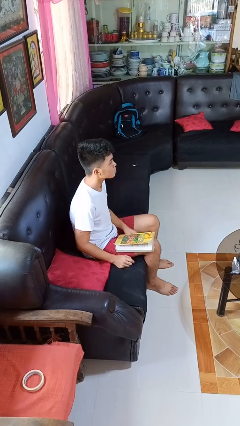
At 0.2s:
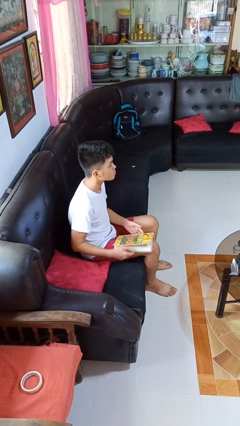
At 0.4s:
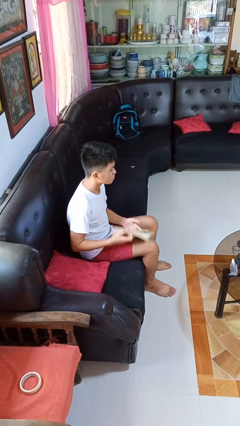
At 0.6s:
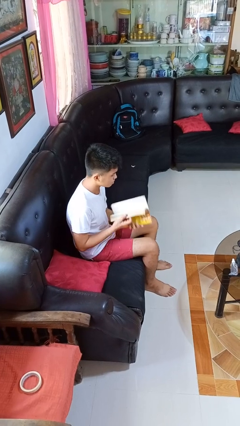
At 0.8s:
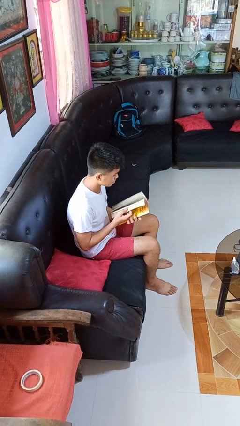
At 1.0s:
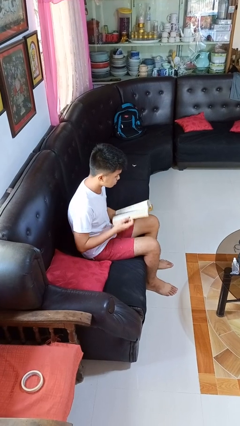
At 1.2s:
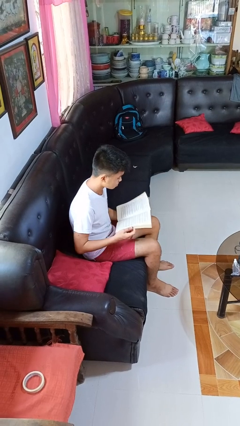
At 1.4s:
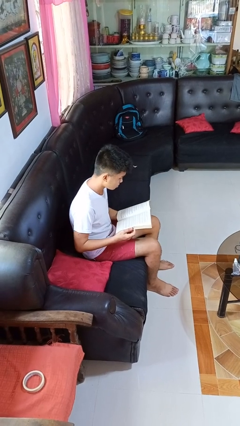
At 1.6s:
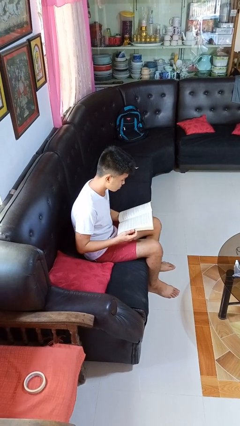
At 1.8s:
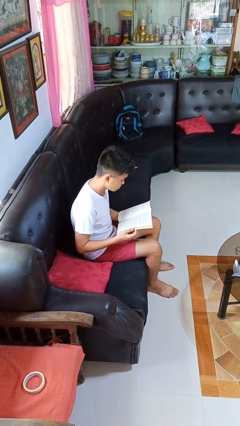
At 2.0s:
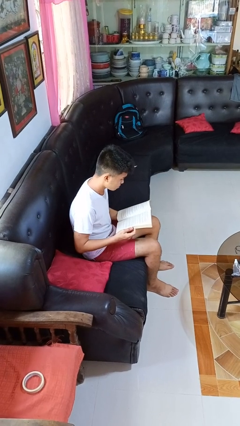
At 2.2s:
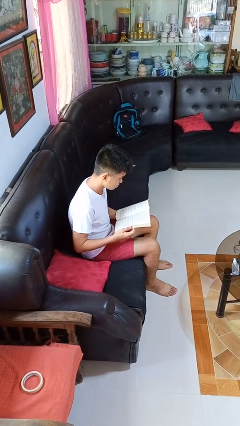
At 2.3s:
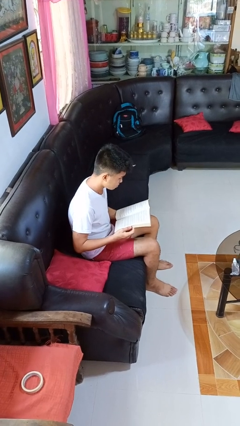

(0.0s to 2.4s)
person reads book

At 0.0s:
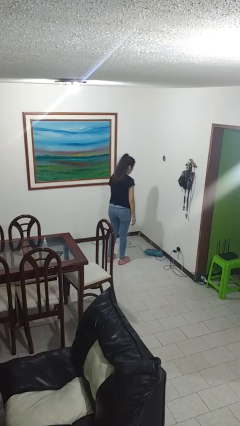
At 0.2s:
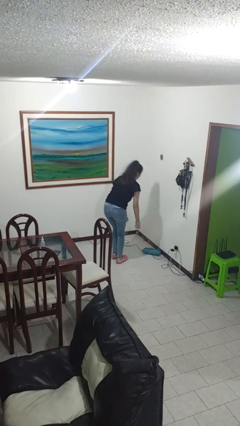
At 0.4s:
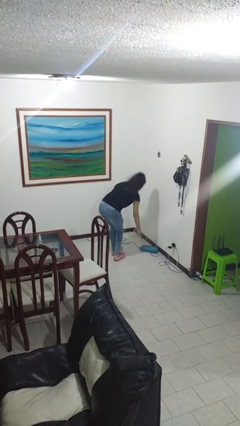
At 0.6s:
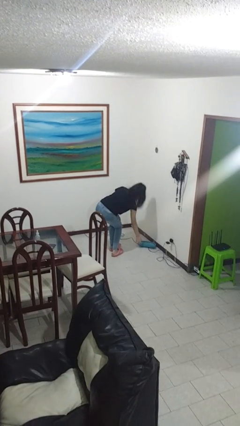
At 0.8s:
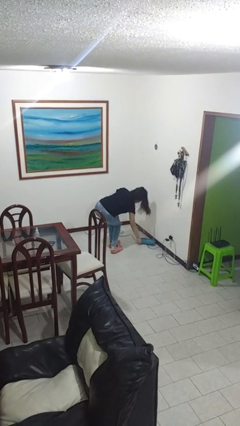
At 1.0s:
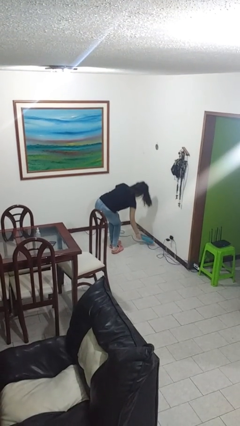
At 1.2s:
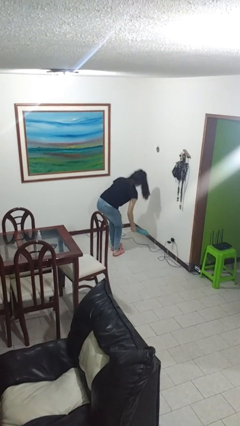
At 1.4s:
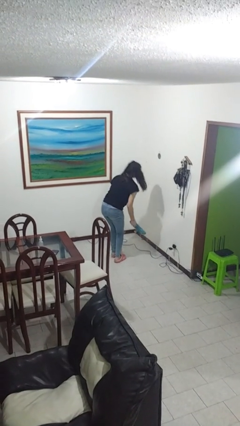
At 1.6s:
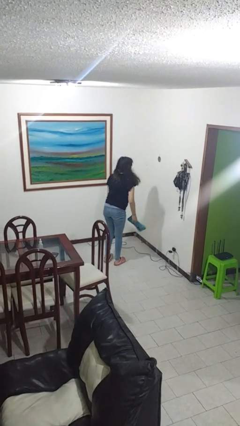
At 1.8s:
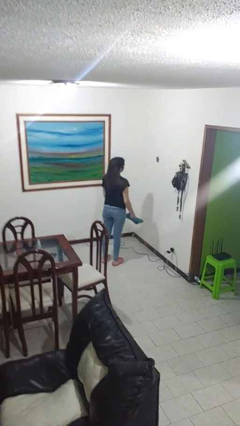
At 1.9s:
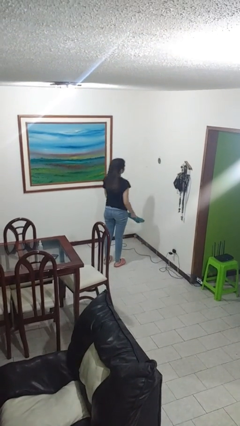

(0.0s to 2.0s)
person picks up object from floor

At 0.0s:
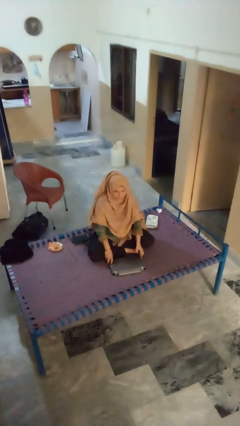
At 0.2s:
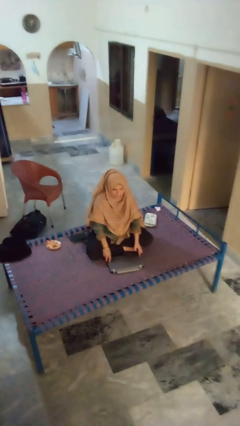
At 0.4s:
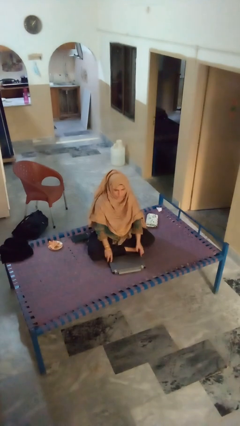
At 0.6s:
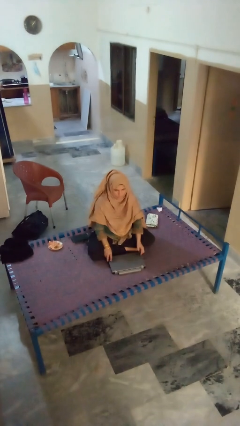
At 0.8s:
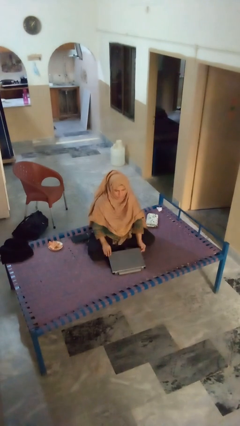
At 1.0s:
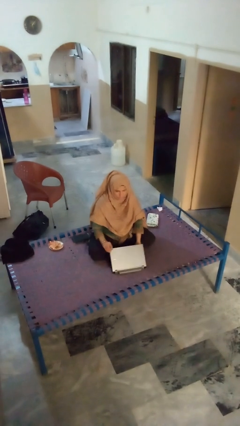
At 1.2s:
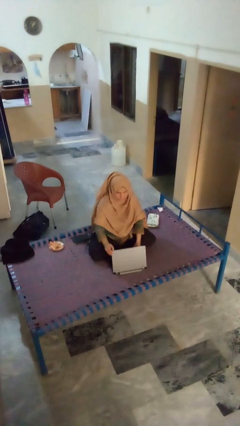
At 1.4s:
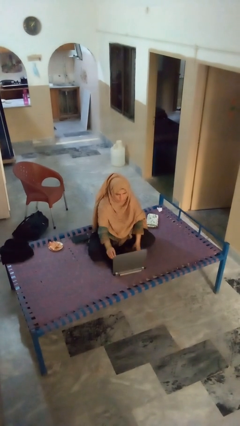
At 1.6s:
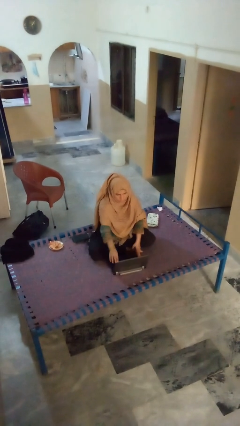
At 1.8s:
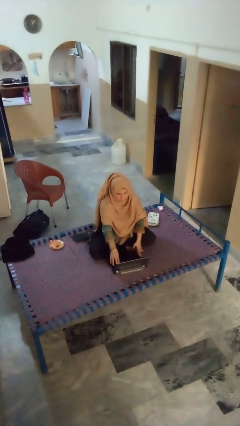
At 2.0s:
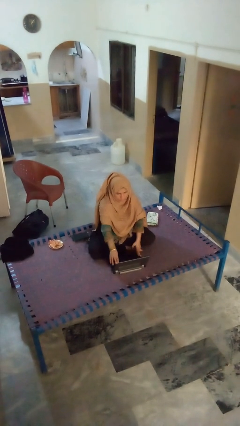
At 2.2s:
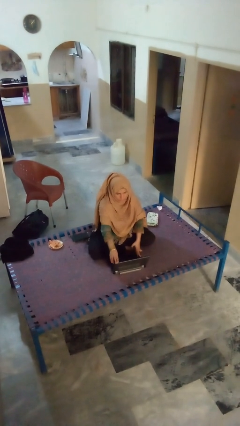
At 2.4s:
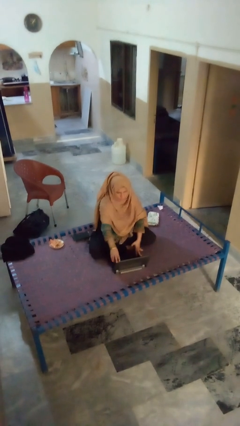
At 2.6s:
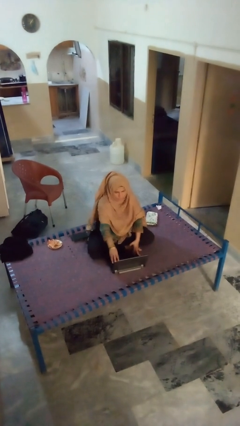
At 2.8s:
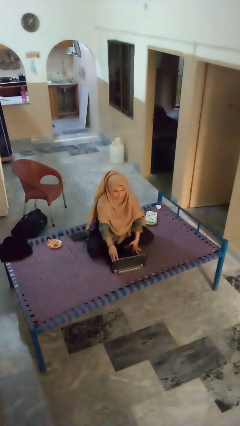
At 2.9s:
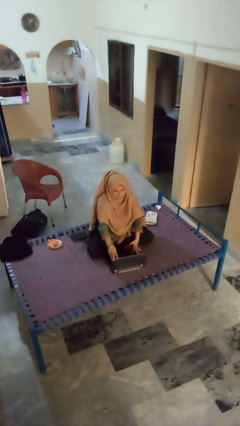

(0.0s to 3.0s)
person opens laptop

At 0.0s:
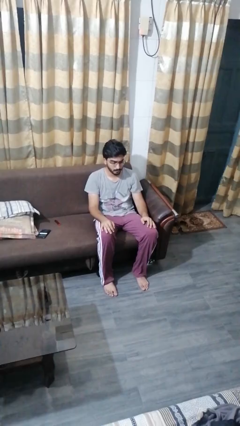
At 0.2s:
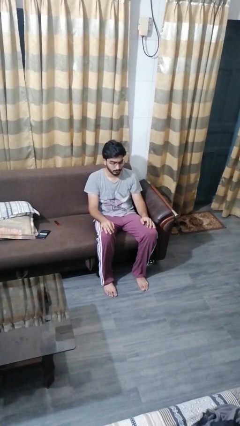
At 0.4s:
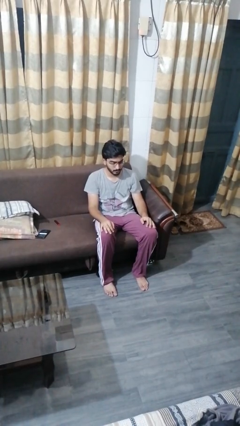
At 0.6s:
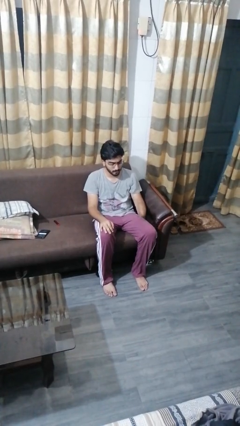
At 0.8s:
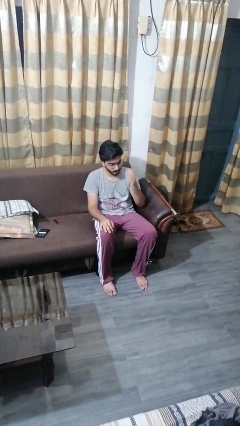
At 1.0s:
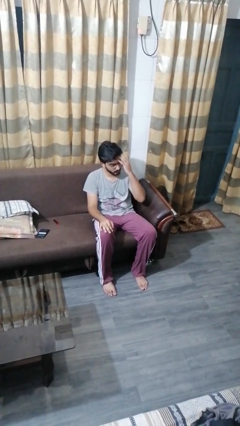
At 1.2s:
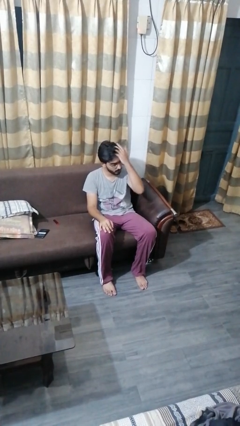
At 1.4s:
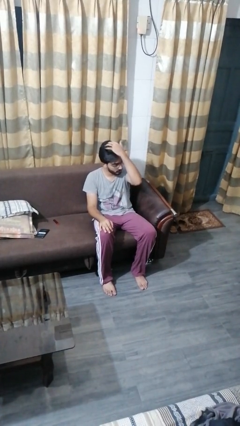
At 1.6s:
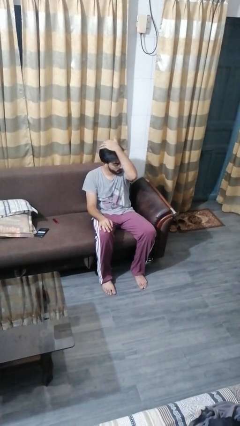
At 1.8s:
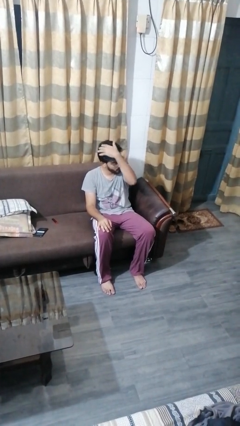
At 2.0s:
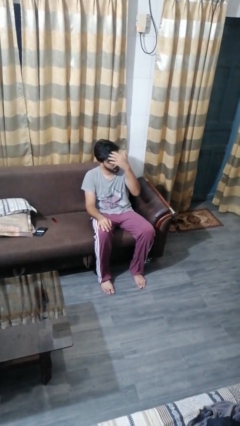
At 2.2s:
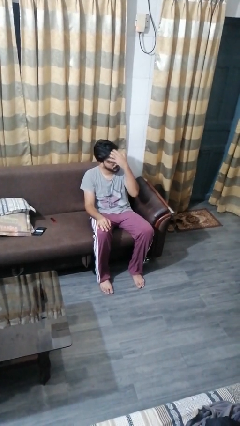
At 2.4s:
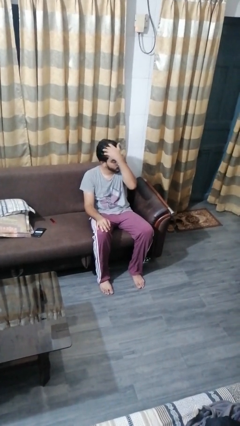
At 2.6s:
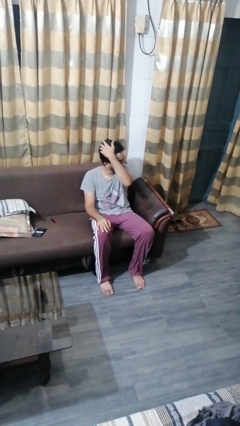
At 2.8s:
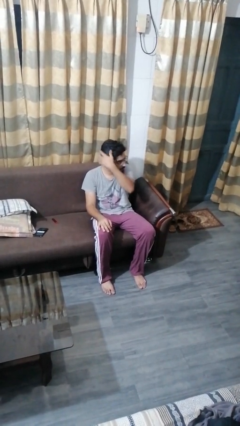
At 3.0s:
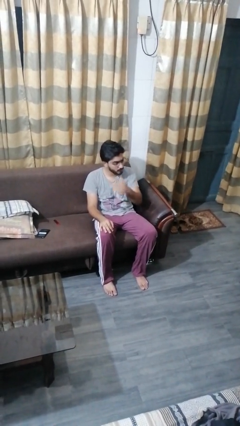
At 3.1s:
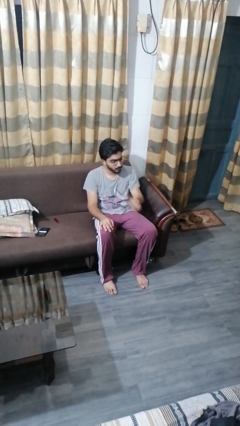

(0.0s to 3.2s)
person strokes hair

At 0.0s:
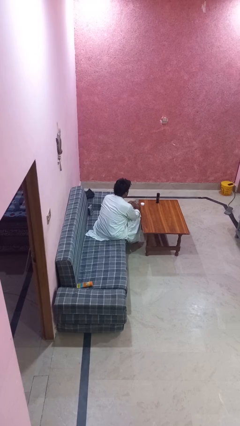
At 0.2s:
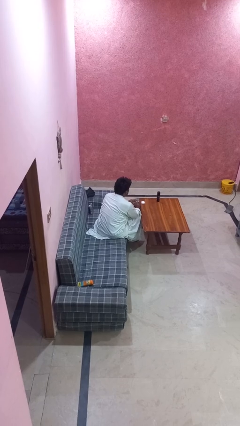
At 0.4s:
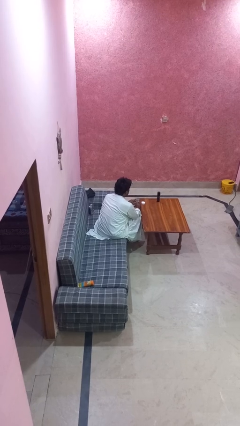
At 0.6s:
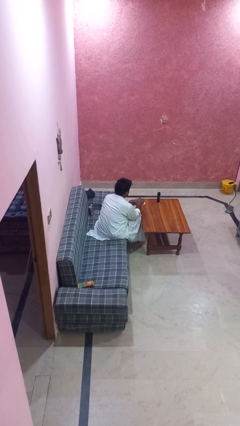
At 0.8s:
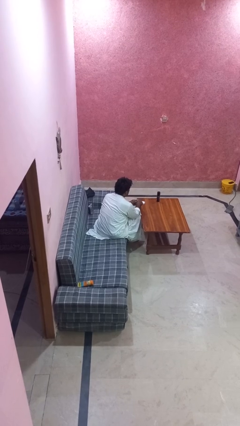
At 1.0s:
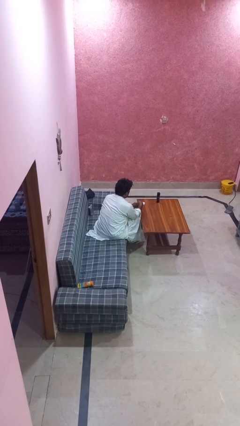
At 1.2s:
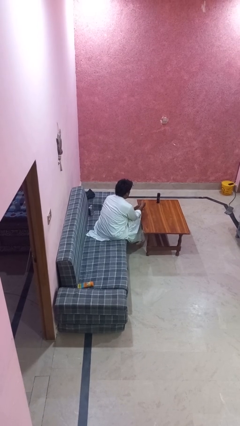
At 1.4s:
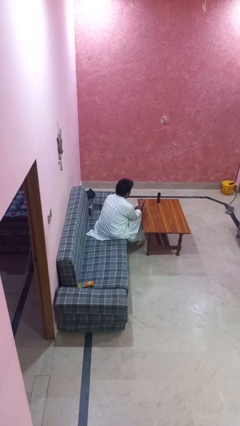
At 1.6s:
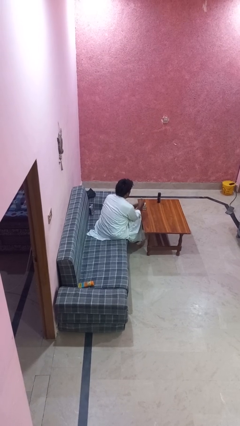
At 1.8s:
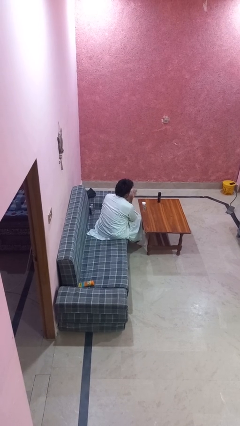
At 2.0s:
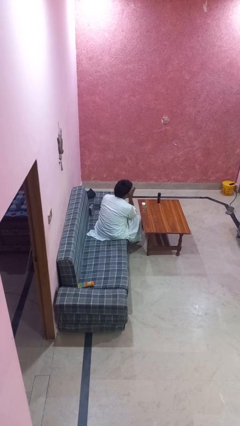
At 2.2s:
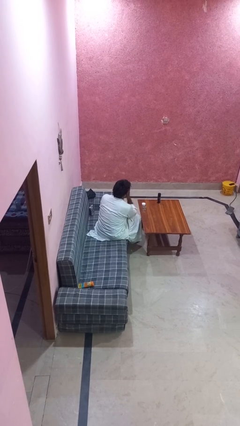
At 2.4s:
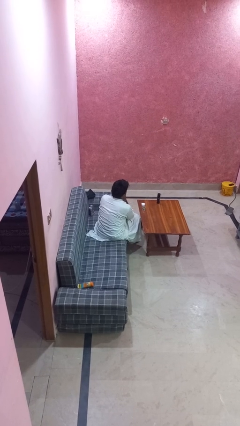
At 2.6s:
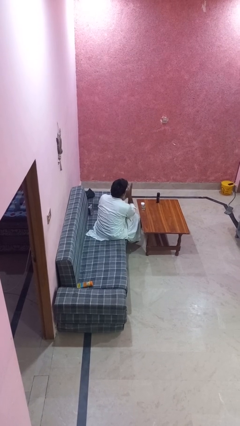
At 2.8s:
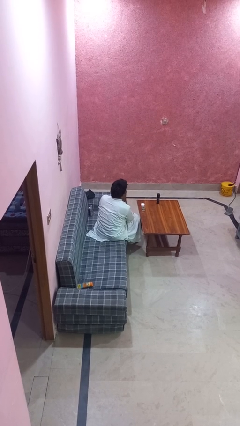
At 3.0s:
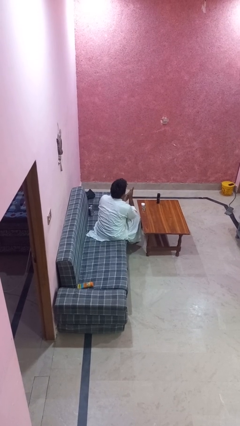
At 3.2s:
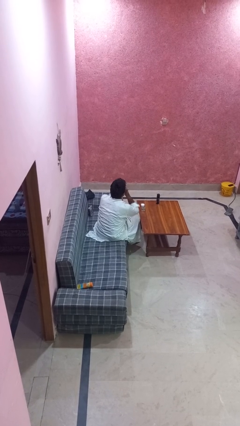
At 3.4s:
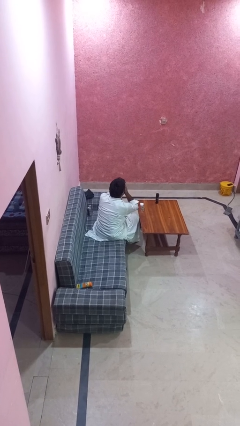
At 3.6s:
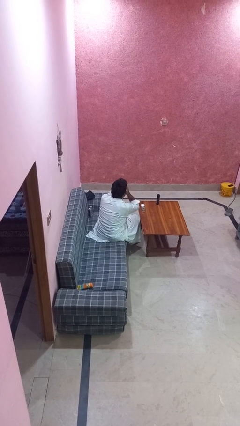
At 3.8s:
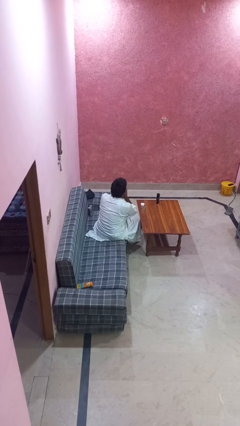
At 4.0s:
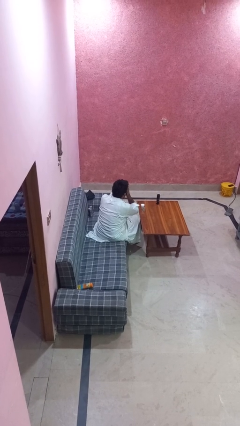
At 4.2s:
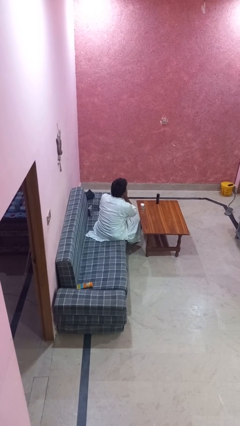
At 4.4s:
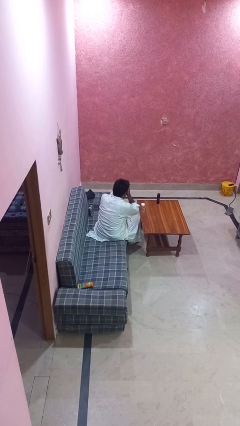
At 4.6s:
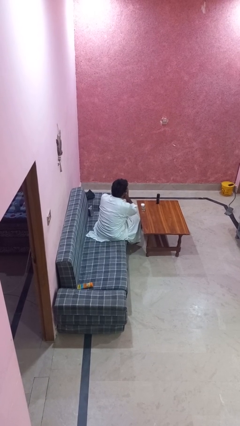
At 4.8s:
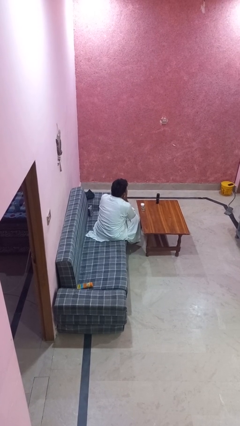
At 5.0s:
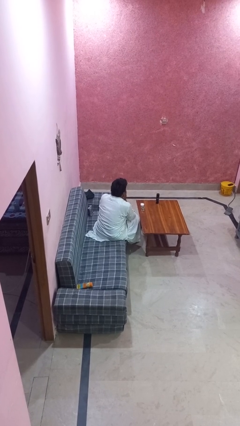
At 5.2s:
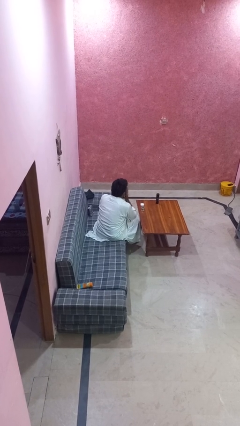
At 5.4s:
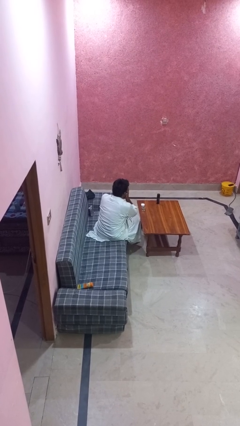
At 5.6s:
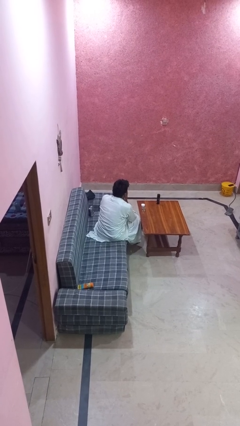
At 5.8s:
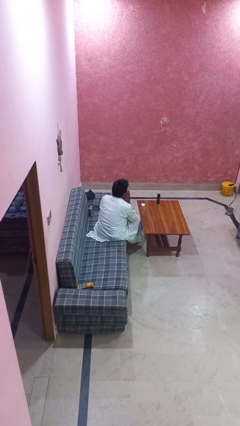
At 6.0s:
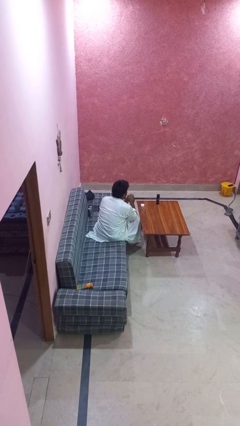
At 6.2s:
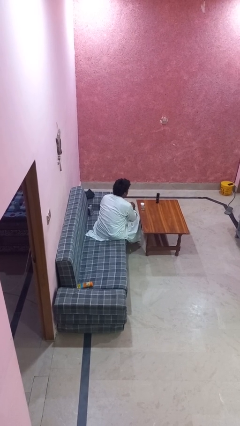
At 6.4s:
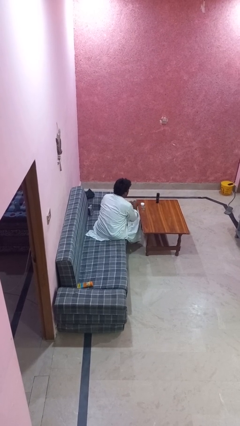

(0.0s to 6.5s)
person applies facial moisturizer

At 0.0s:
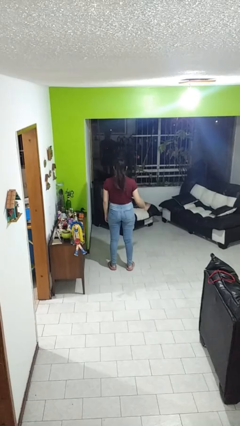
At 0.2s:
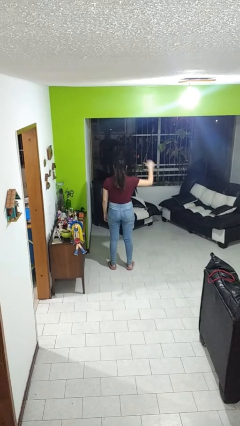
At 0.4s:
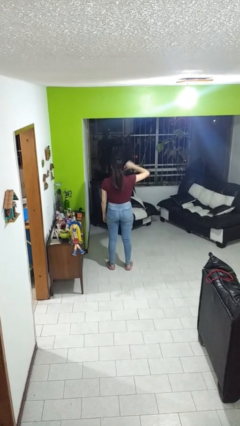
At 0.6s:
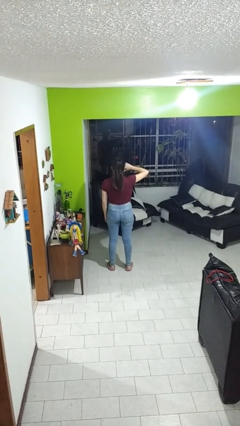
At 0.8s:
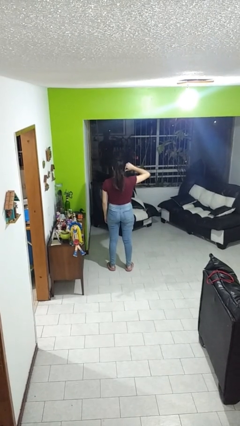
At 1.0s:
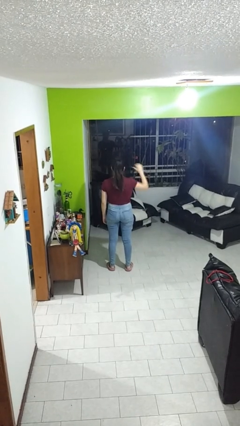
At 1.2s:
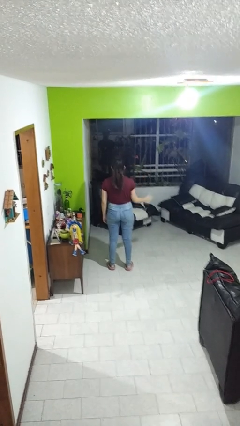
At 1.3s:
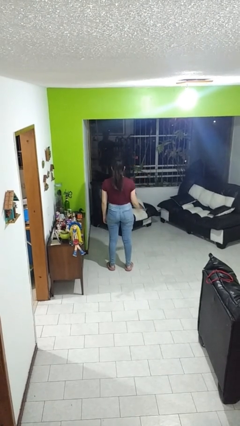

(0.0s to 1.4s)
person gestures thumbs down
